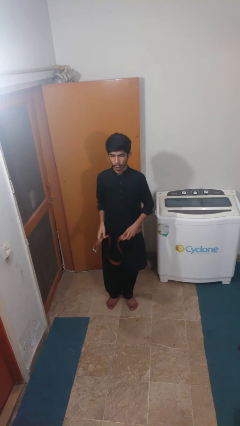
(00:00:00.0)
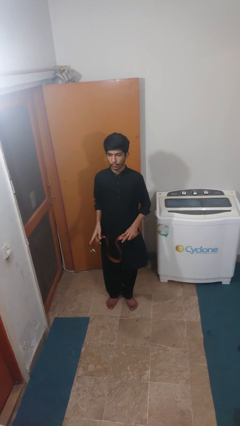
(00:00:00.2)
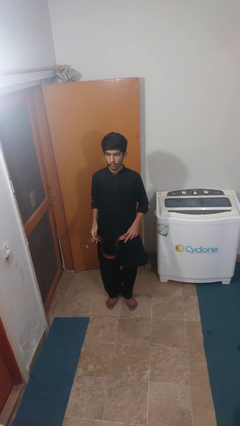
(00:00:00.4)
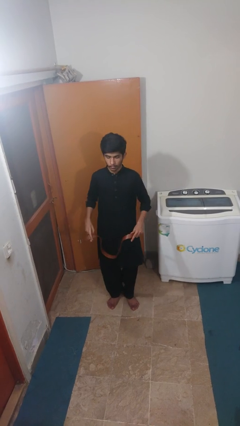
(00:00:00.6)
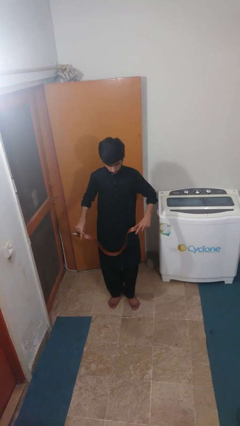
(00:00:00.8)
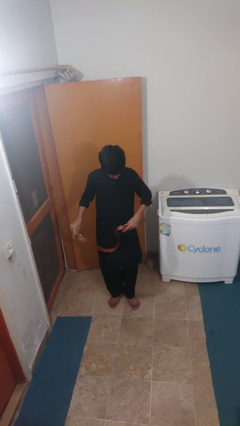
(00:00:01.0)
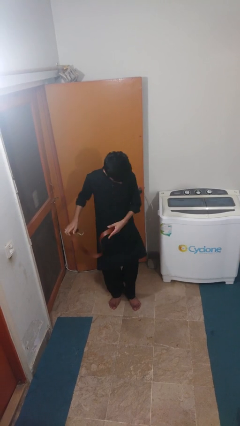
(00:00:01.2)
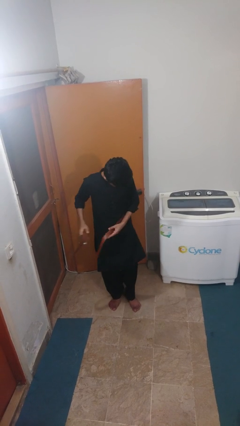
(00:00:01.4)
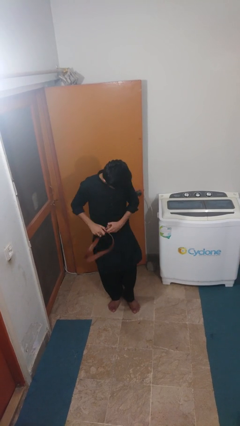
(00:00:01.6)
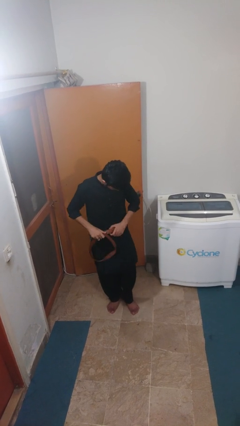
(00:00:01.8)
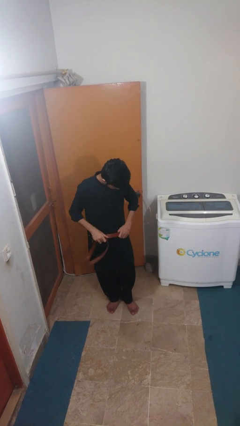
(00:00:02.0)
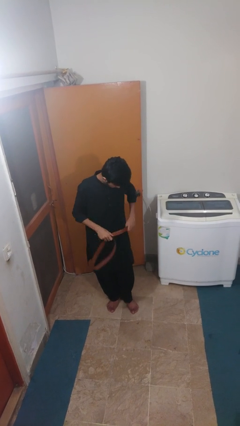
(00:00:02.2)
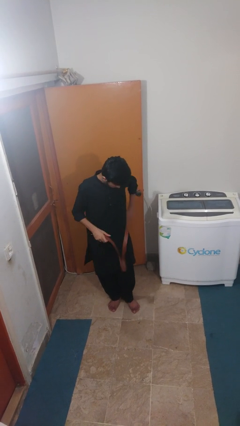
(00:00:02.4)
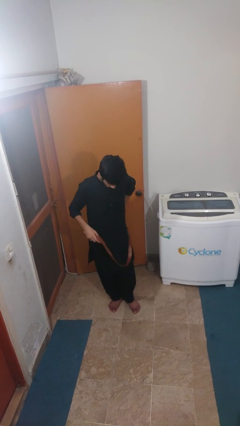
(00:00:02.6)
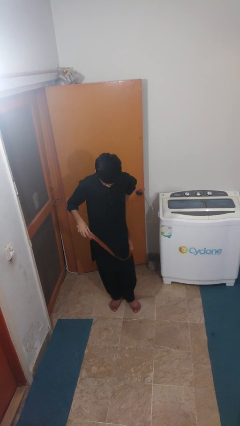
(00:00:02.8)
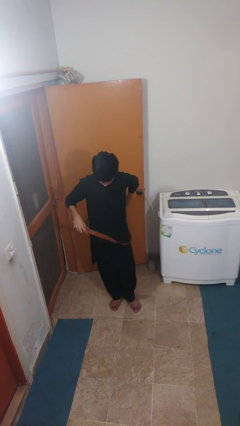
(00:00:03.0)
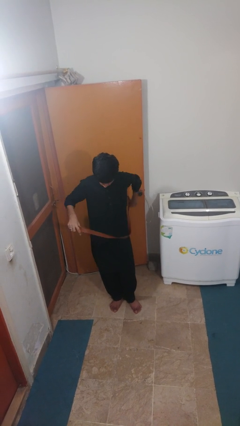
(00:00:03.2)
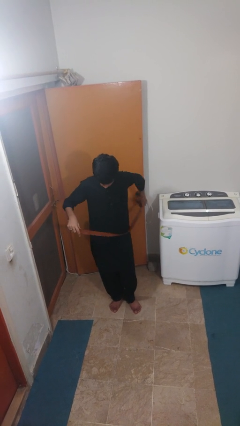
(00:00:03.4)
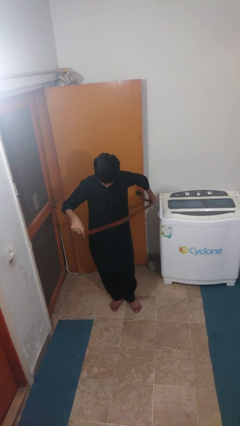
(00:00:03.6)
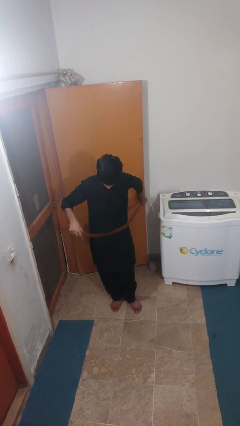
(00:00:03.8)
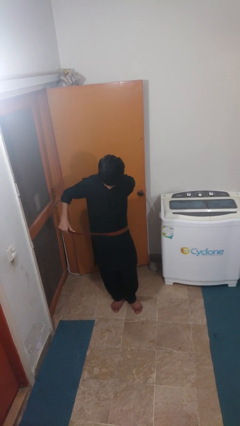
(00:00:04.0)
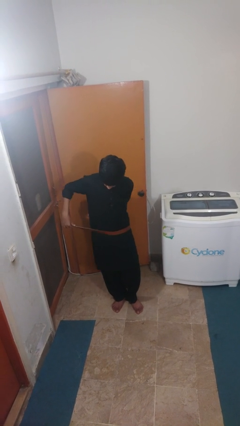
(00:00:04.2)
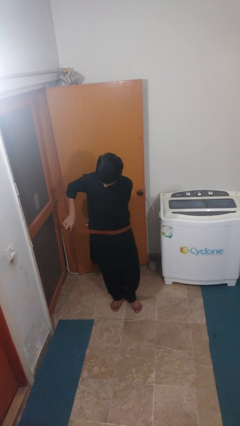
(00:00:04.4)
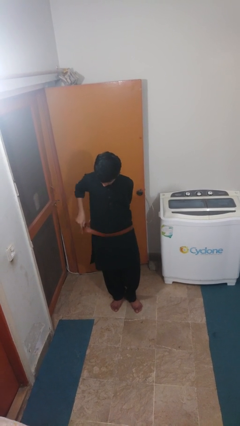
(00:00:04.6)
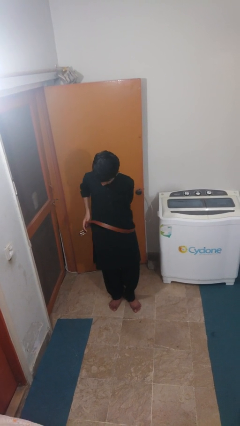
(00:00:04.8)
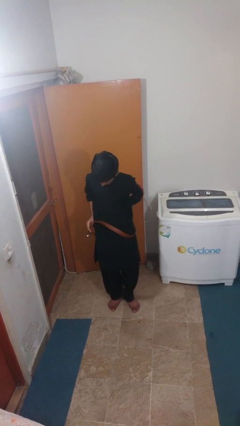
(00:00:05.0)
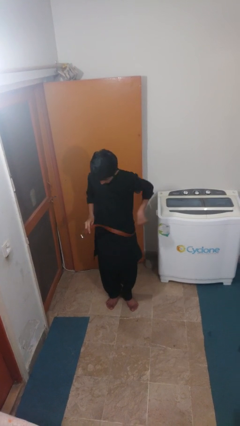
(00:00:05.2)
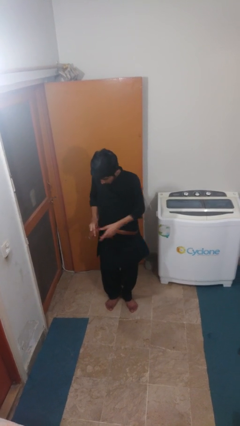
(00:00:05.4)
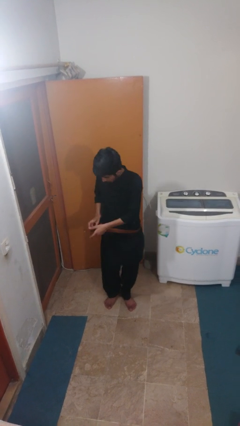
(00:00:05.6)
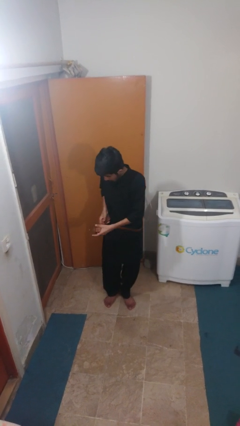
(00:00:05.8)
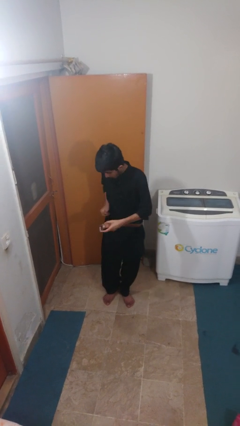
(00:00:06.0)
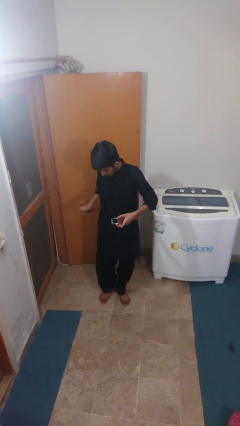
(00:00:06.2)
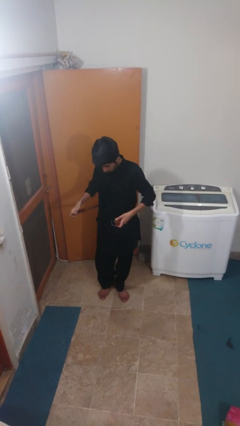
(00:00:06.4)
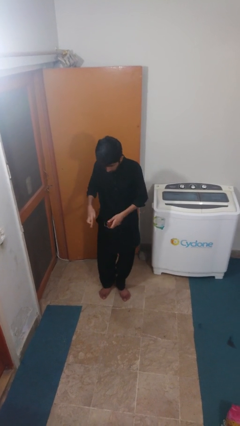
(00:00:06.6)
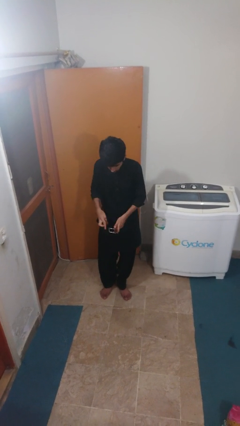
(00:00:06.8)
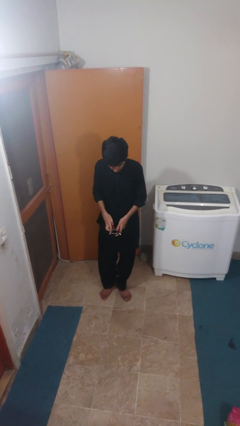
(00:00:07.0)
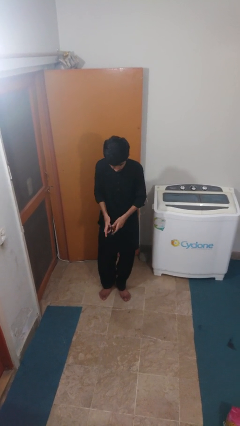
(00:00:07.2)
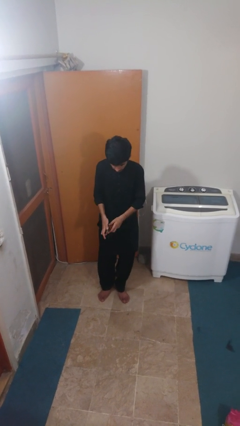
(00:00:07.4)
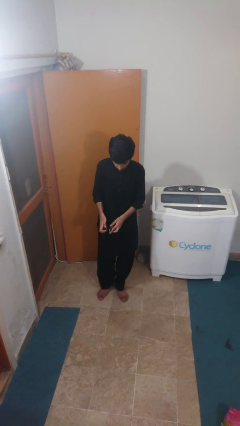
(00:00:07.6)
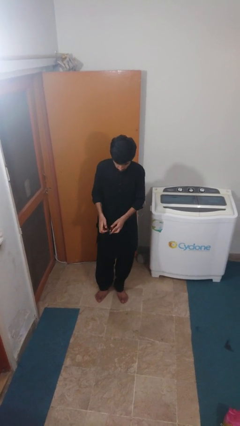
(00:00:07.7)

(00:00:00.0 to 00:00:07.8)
person puts on belt

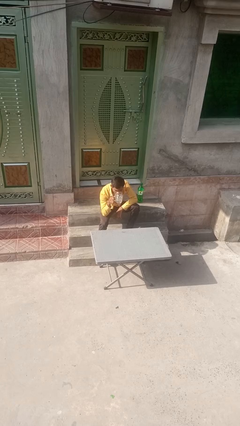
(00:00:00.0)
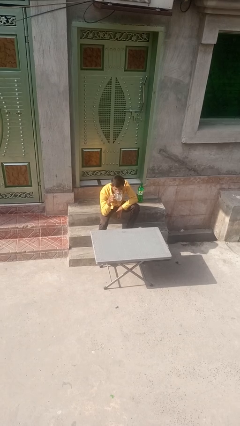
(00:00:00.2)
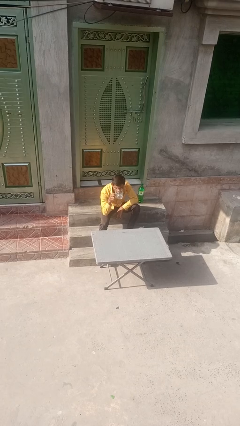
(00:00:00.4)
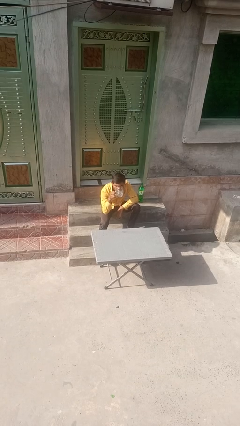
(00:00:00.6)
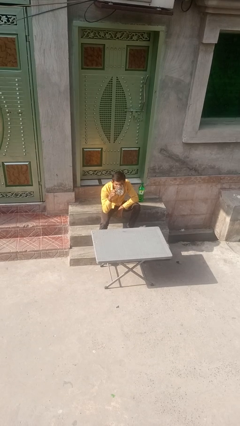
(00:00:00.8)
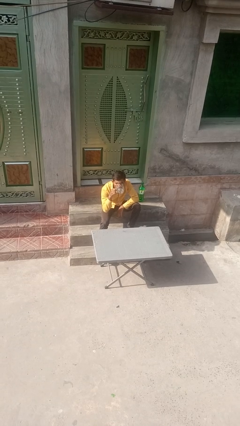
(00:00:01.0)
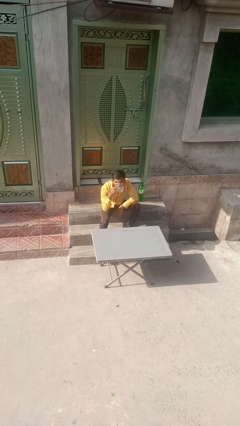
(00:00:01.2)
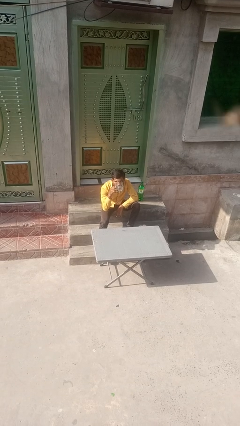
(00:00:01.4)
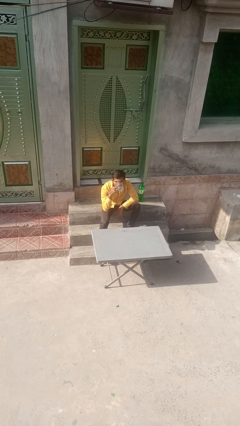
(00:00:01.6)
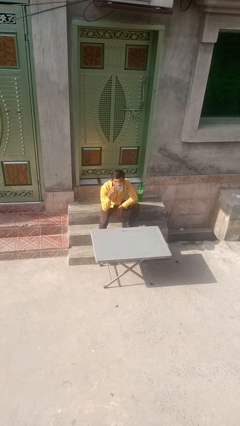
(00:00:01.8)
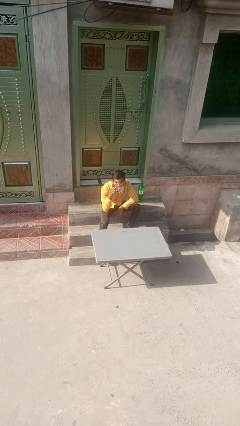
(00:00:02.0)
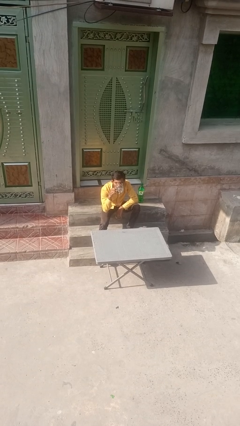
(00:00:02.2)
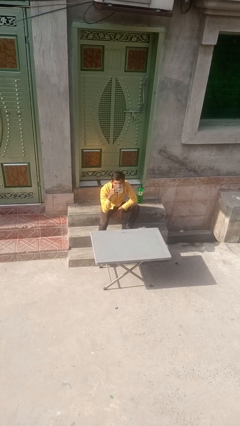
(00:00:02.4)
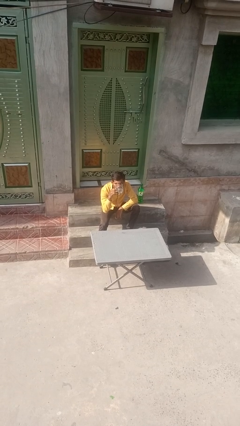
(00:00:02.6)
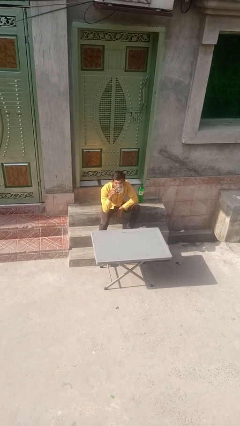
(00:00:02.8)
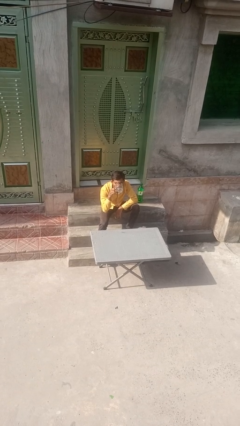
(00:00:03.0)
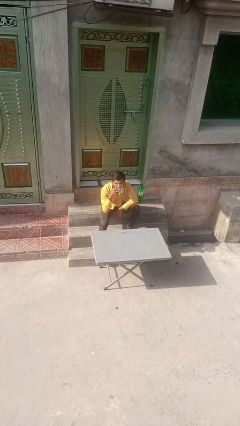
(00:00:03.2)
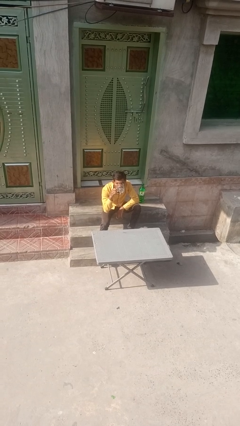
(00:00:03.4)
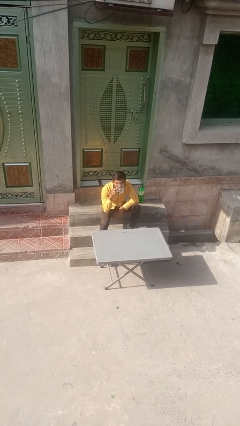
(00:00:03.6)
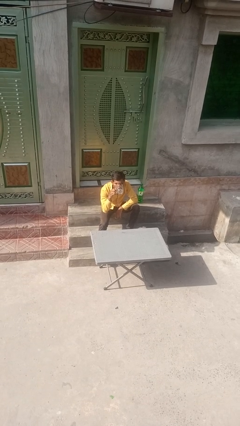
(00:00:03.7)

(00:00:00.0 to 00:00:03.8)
person drinks from mug

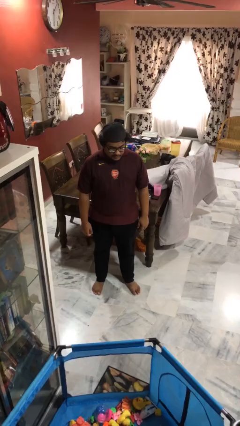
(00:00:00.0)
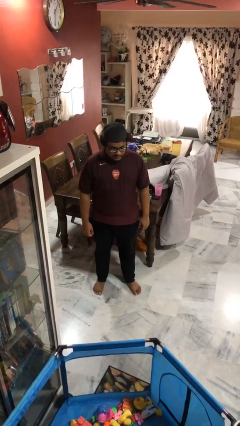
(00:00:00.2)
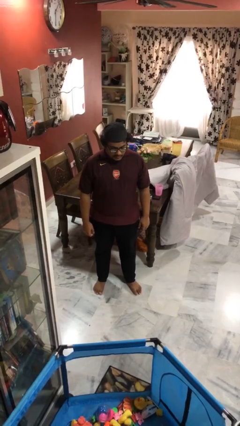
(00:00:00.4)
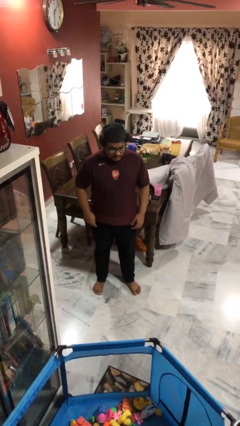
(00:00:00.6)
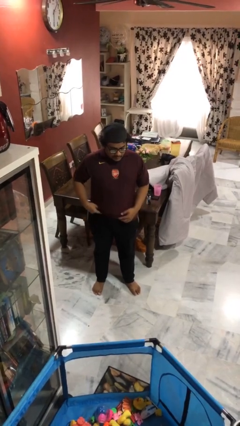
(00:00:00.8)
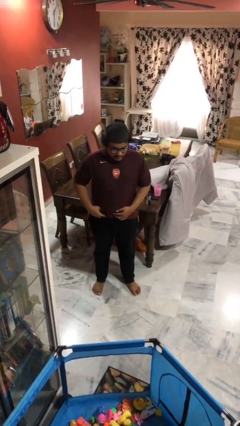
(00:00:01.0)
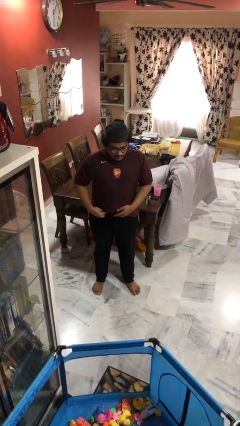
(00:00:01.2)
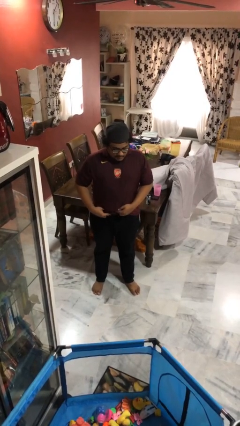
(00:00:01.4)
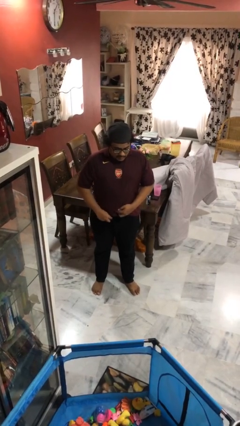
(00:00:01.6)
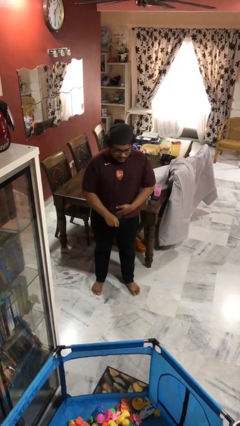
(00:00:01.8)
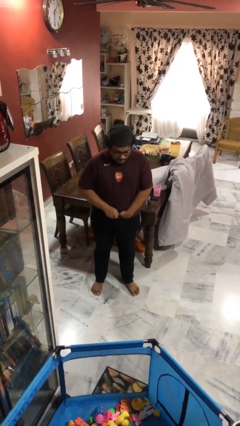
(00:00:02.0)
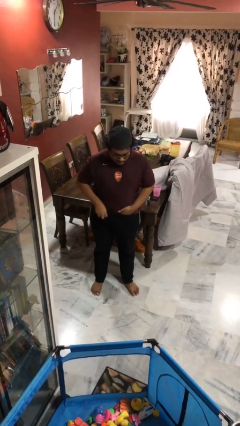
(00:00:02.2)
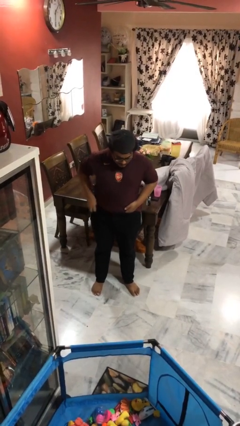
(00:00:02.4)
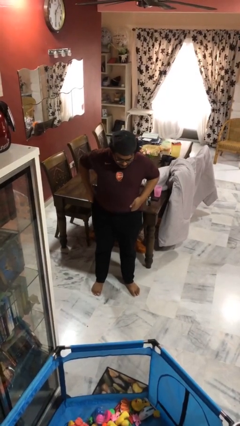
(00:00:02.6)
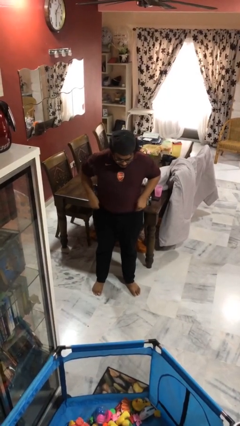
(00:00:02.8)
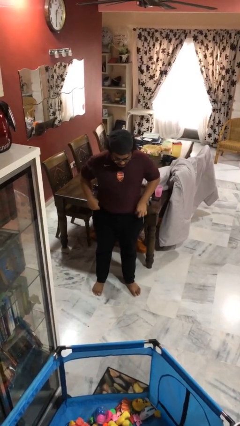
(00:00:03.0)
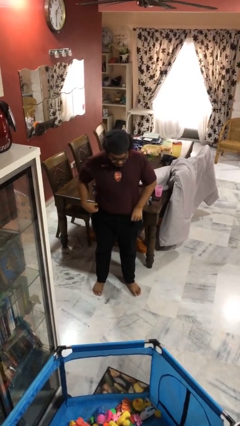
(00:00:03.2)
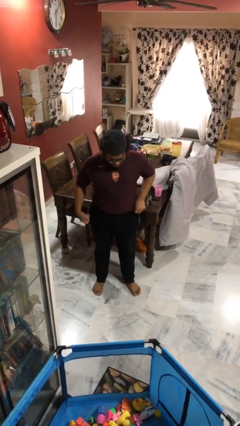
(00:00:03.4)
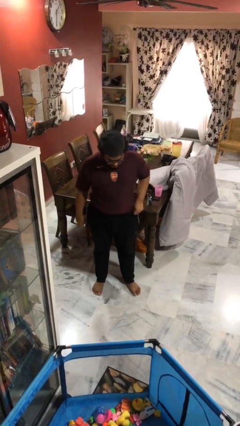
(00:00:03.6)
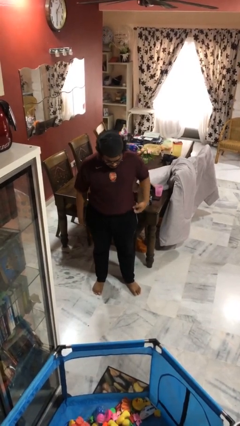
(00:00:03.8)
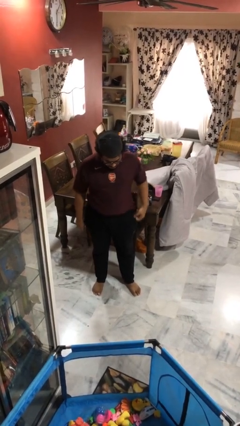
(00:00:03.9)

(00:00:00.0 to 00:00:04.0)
person tucks in shirt

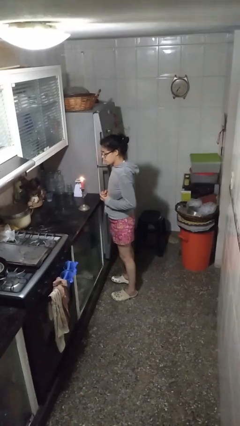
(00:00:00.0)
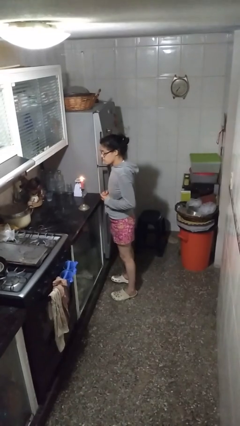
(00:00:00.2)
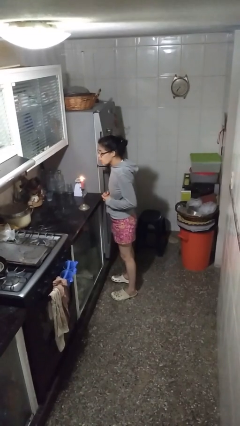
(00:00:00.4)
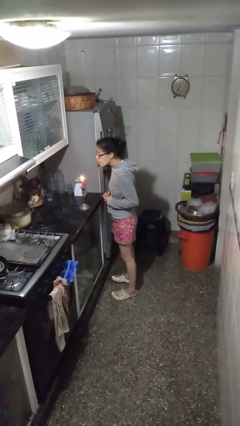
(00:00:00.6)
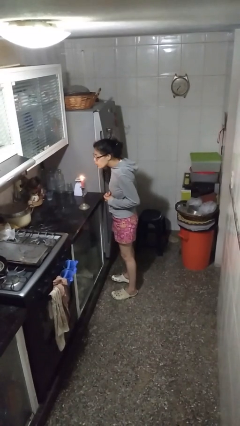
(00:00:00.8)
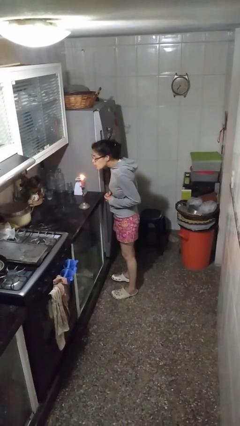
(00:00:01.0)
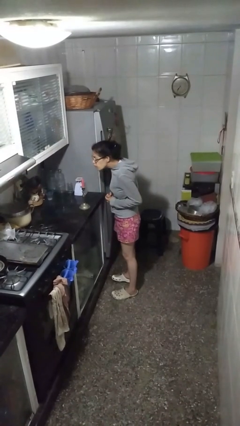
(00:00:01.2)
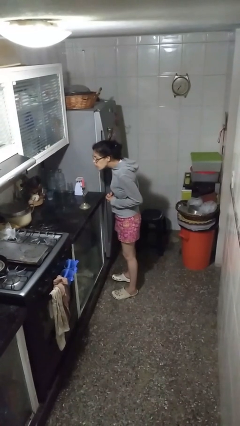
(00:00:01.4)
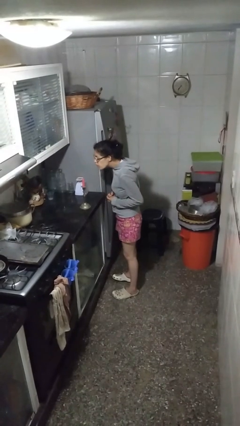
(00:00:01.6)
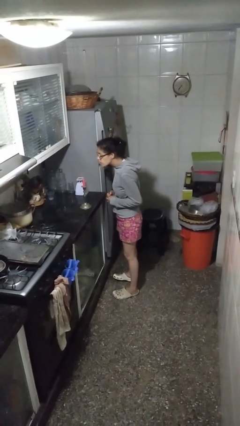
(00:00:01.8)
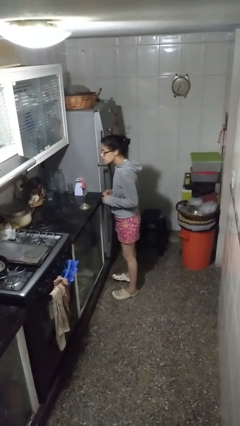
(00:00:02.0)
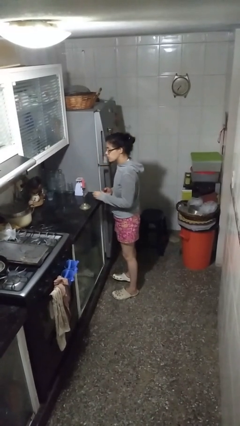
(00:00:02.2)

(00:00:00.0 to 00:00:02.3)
person extinguishes candle
